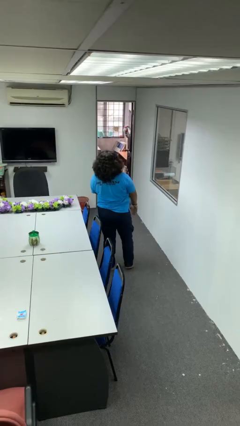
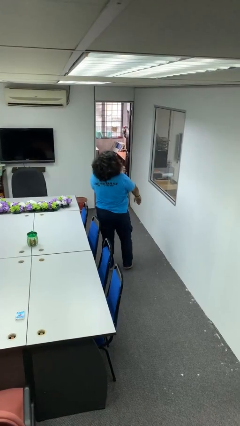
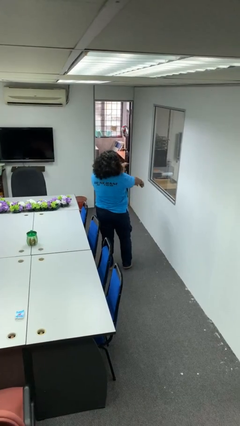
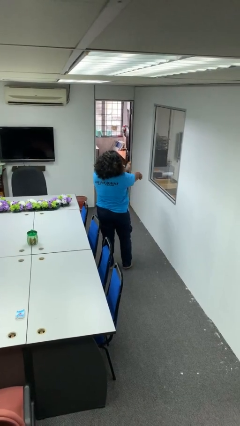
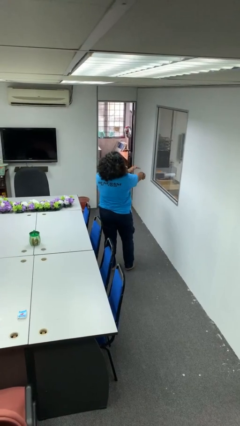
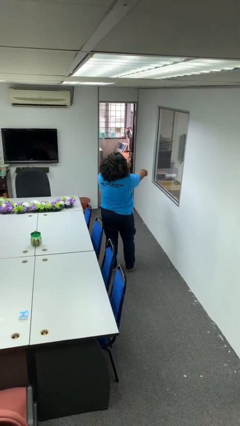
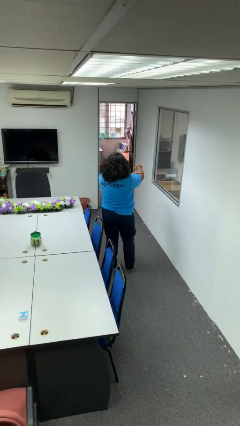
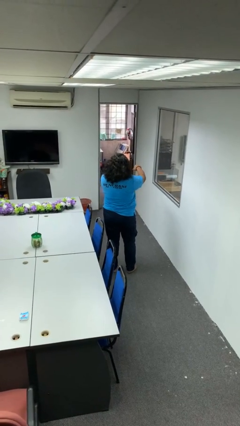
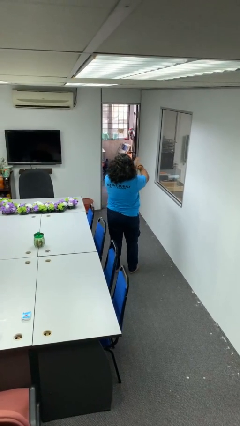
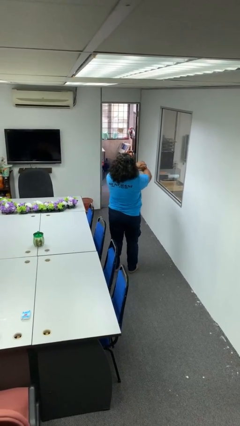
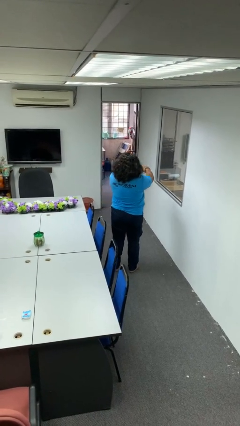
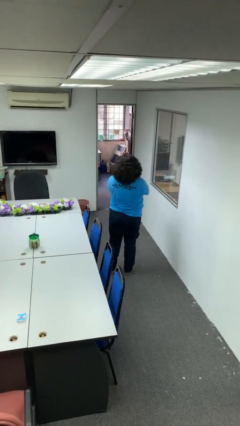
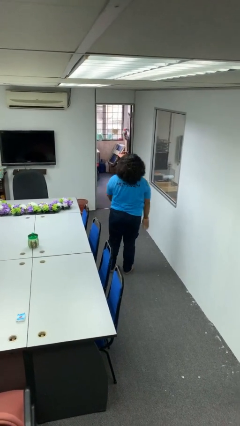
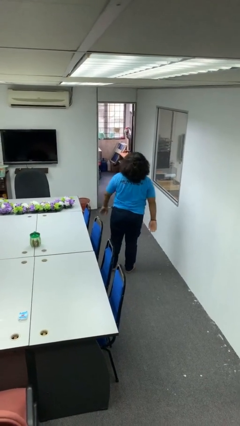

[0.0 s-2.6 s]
person swats bug

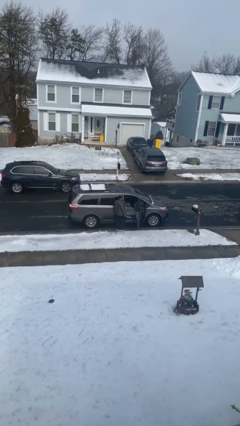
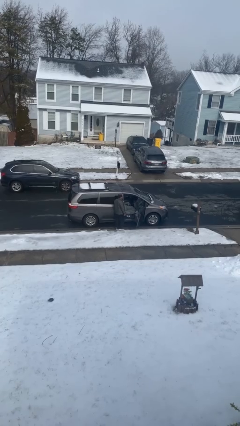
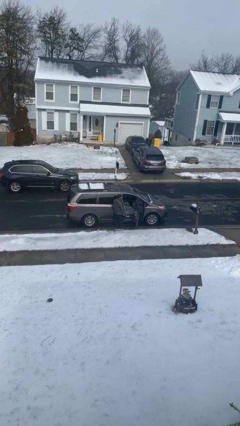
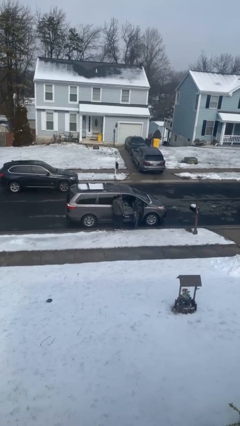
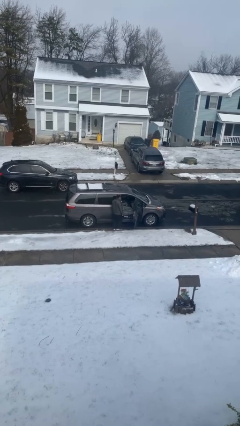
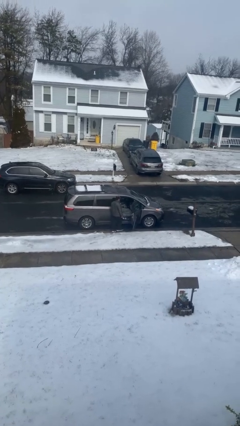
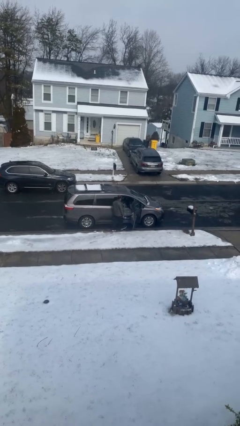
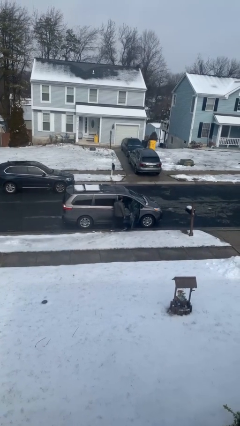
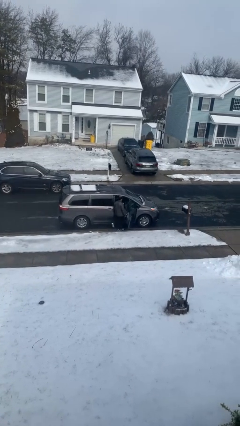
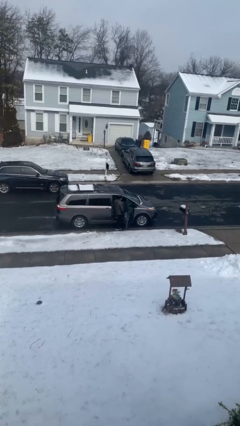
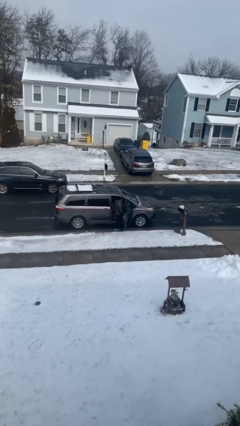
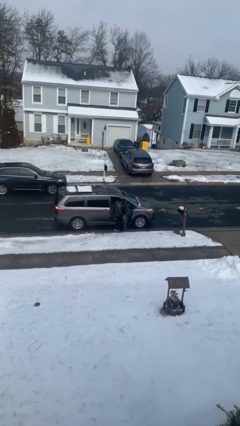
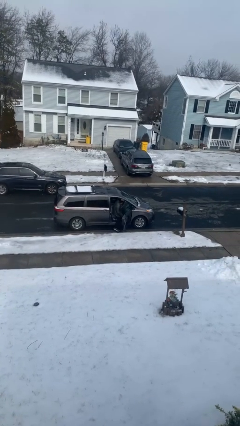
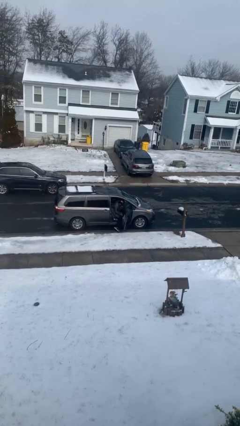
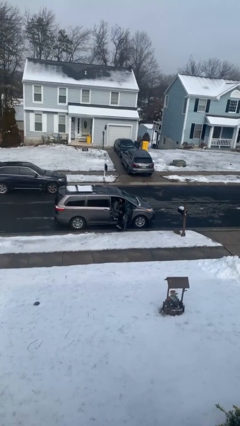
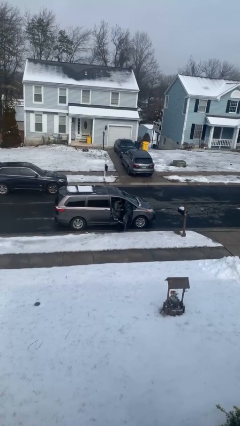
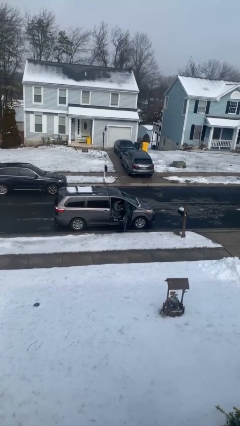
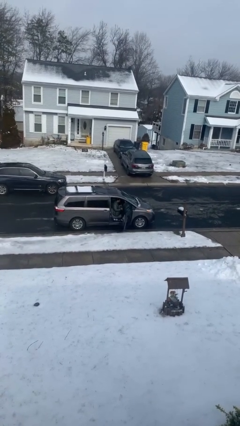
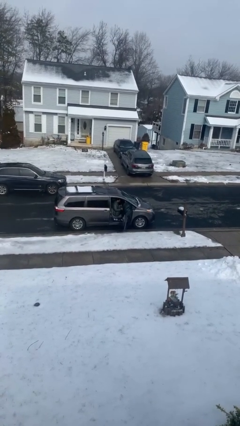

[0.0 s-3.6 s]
person enters car

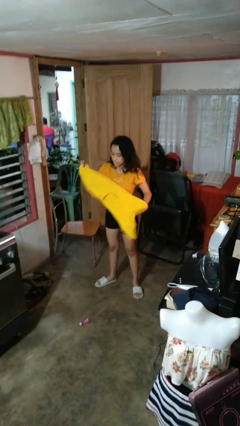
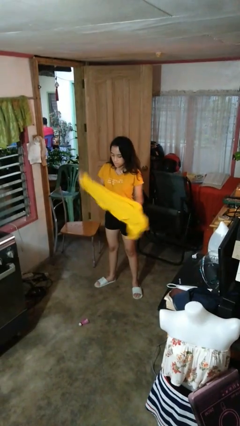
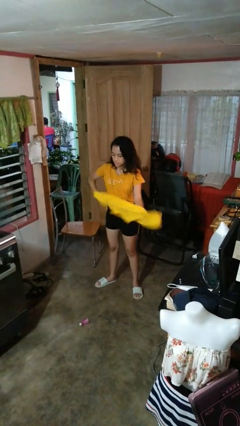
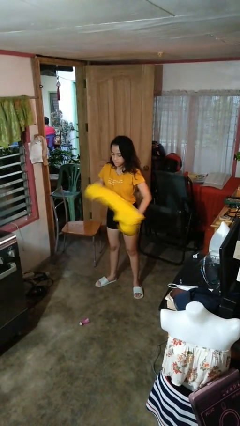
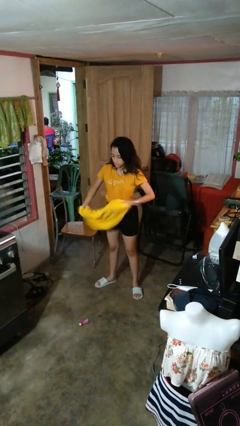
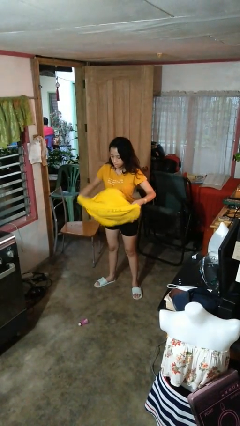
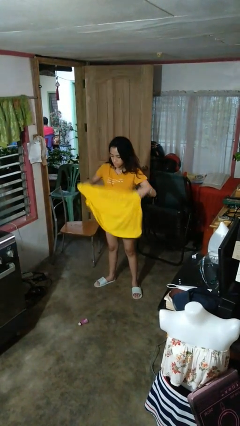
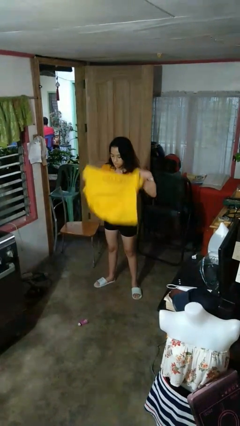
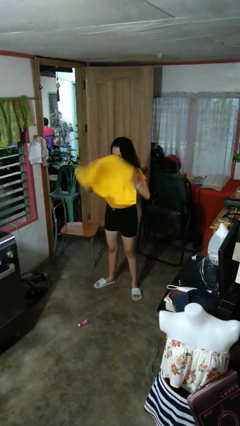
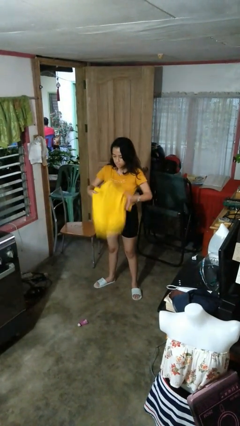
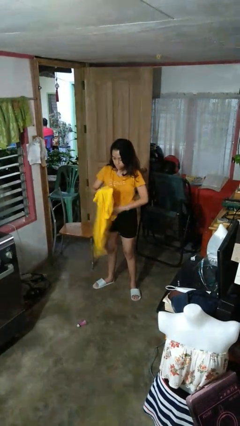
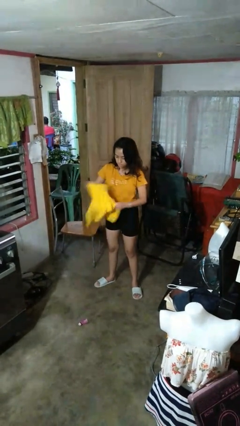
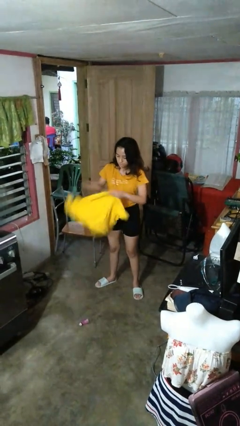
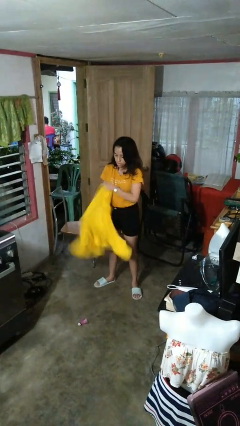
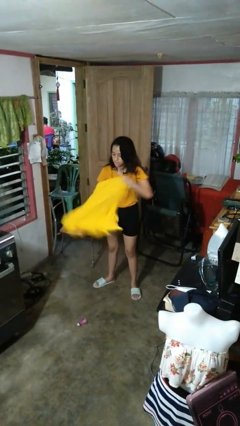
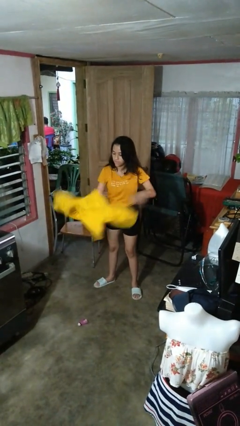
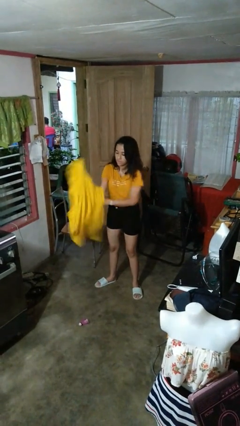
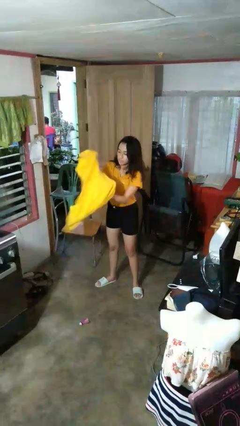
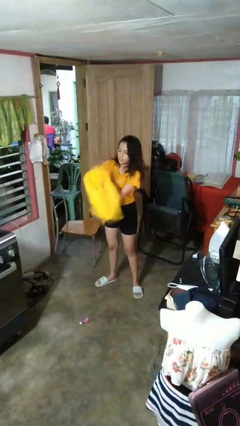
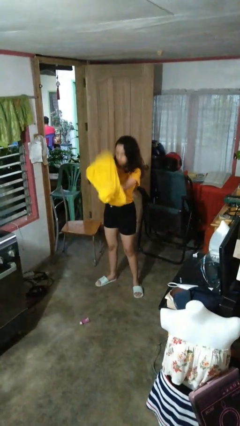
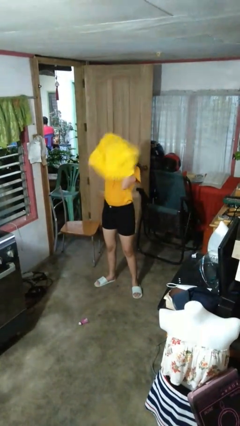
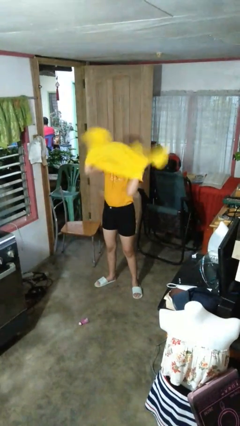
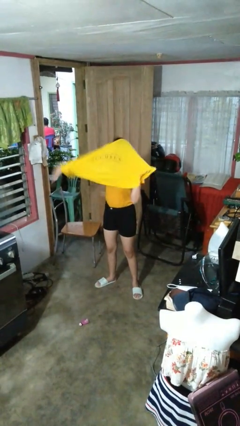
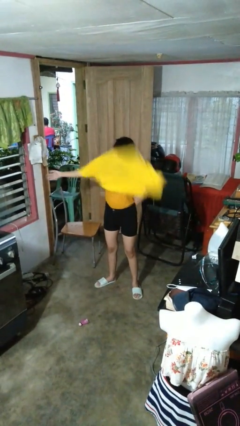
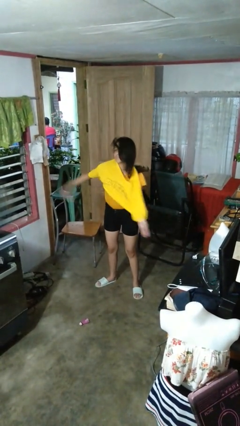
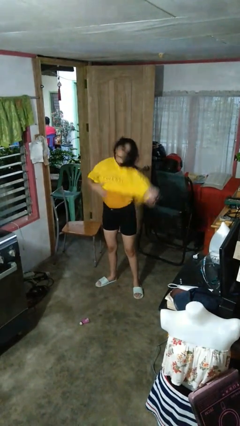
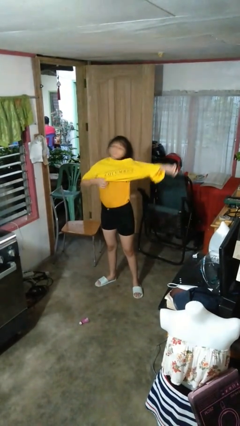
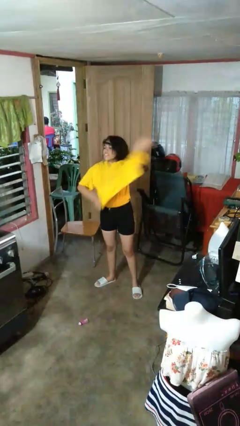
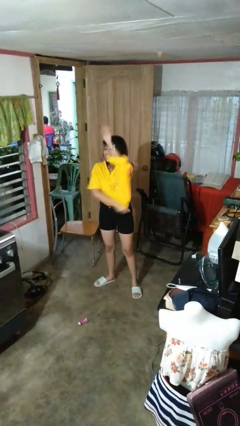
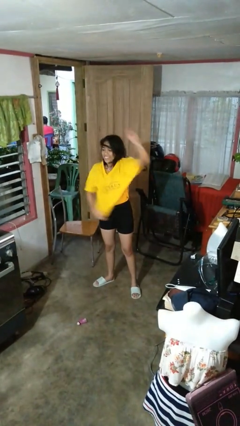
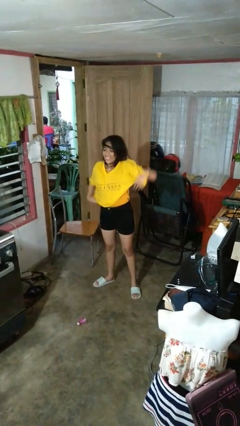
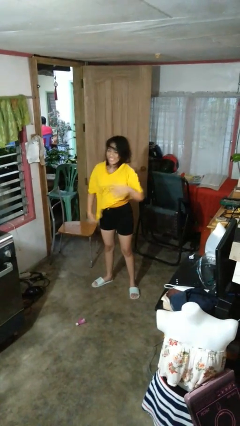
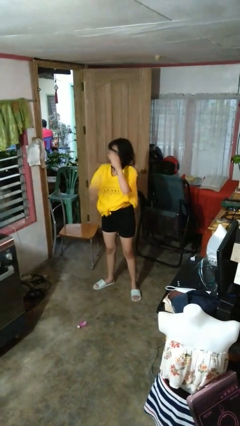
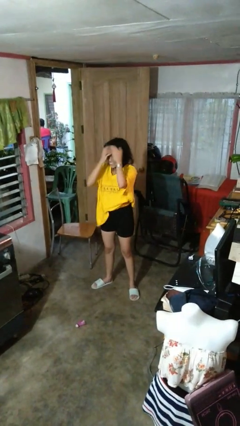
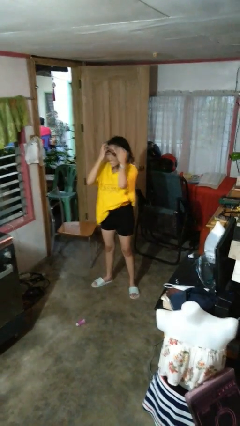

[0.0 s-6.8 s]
person puts on shirt

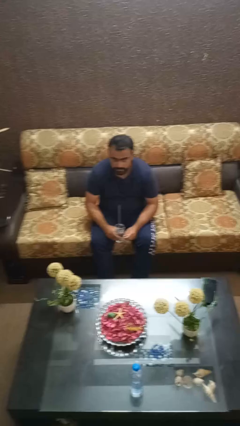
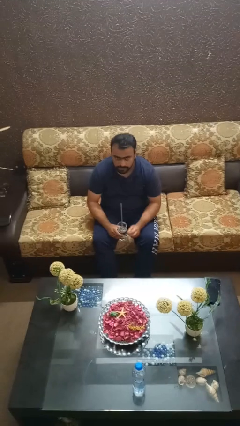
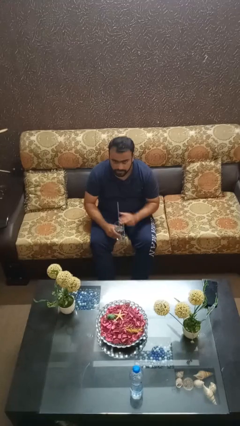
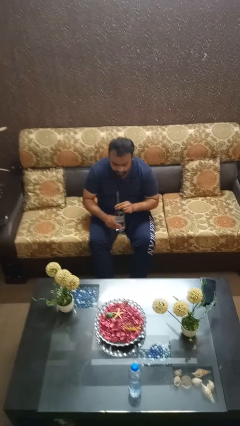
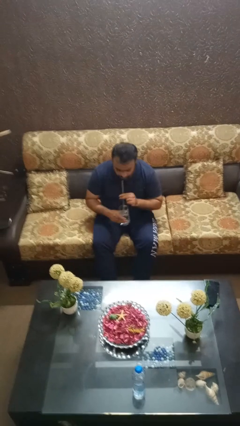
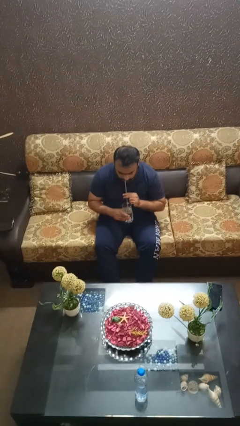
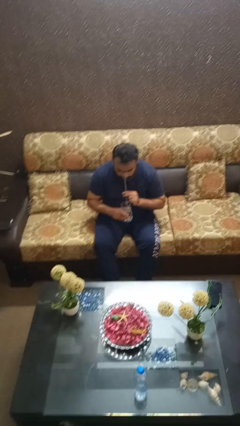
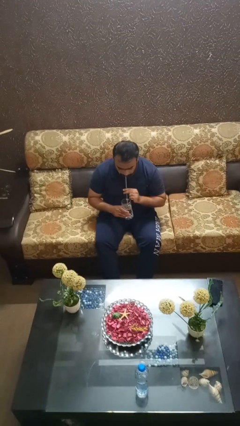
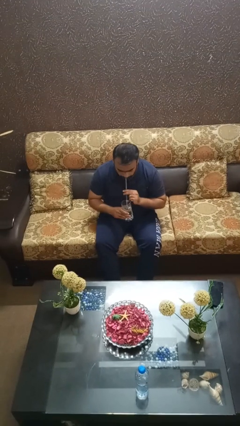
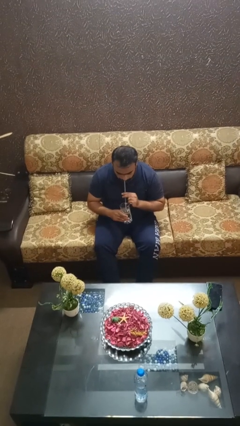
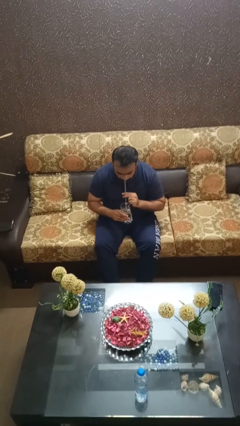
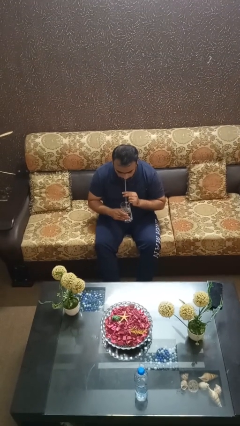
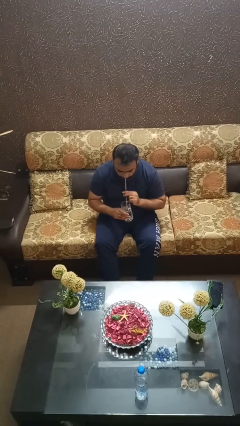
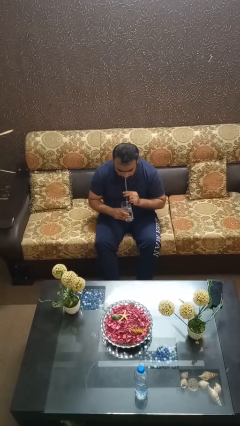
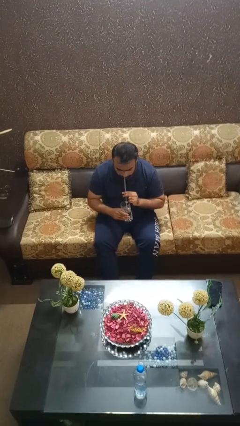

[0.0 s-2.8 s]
person drinks from straw

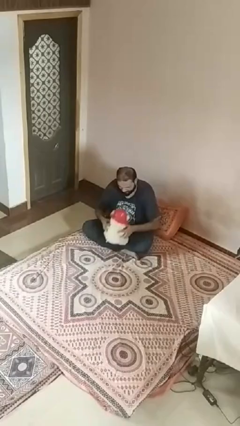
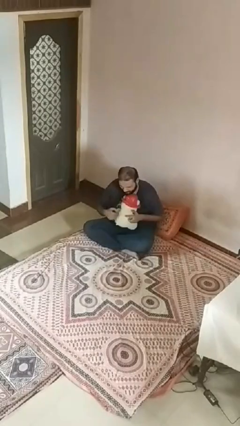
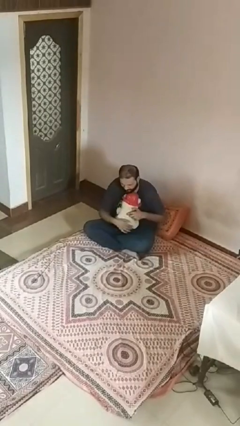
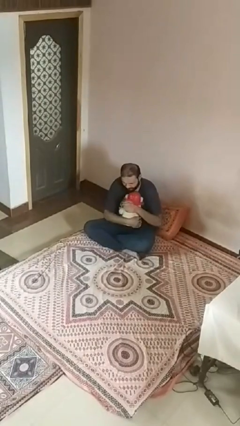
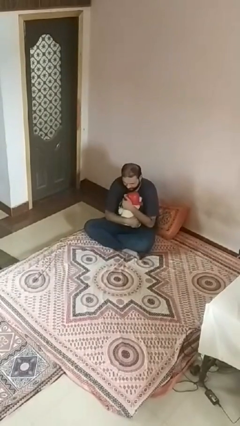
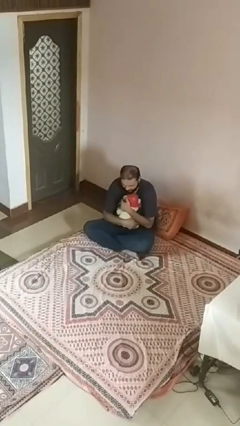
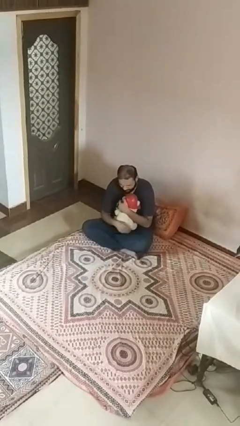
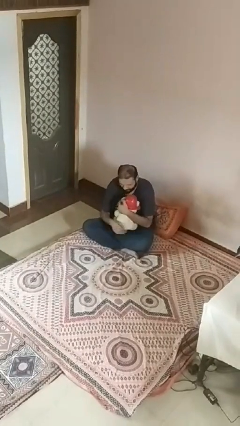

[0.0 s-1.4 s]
person hugs stuffed animal

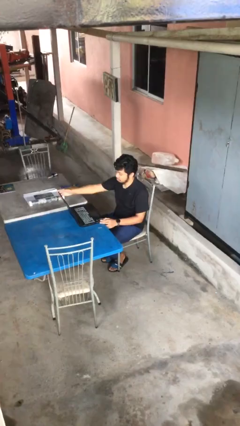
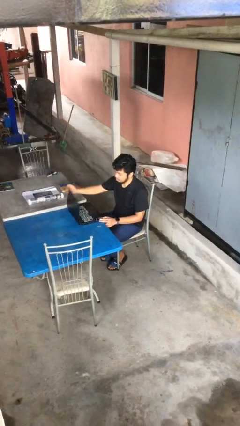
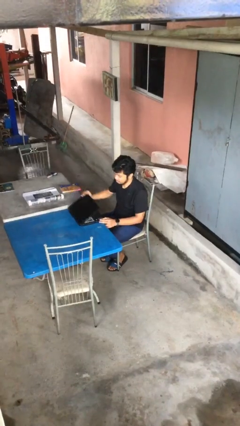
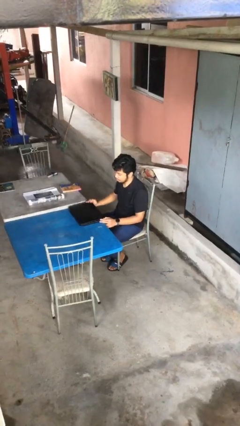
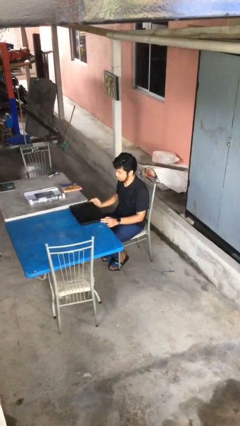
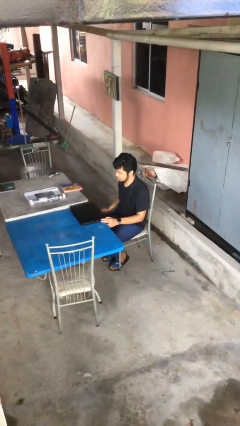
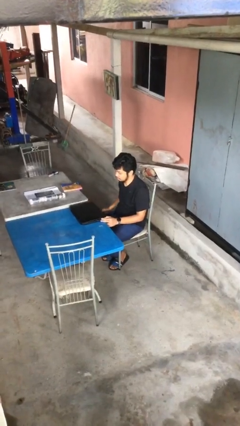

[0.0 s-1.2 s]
person closes laptop
